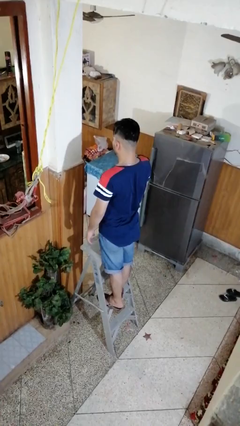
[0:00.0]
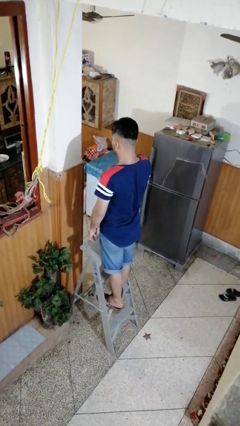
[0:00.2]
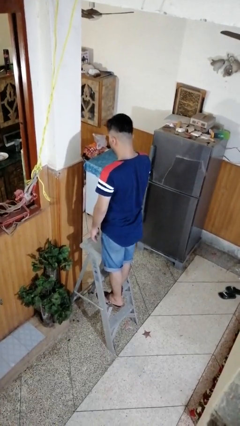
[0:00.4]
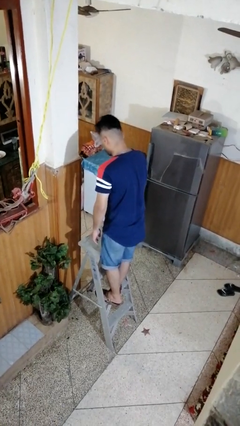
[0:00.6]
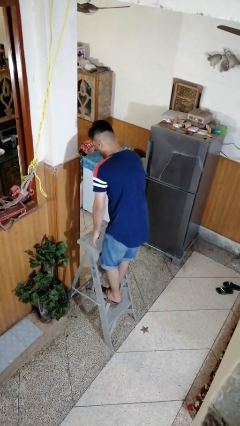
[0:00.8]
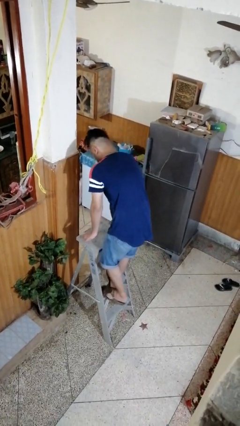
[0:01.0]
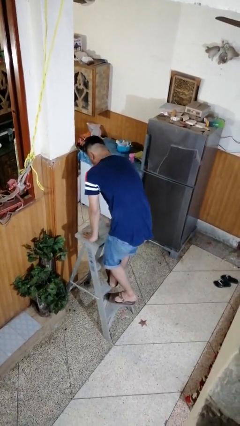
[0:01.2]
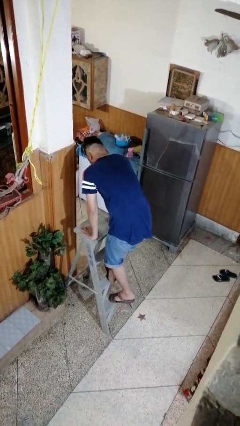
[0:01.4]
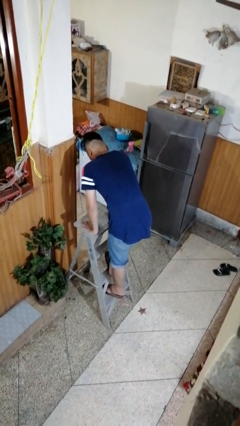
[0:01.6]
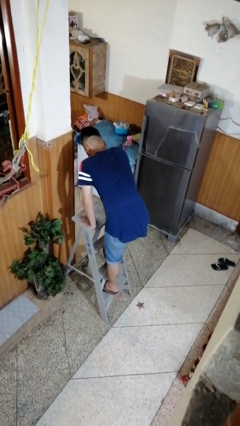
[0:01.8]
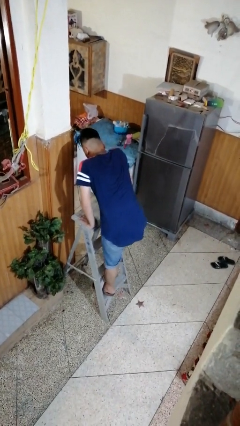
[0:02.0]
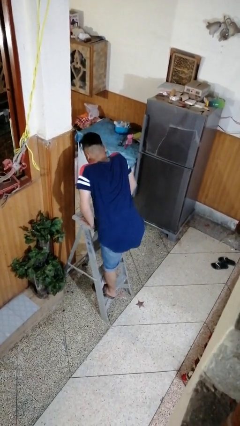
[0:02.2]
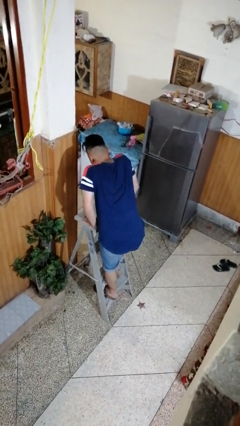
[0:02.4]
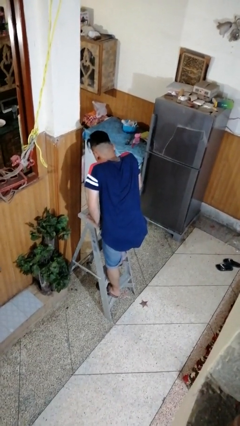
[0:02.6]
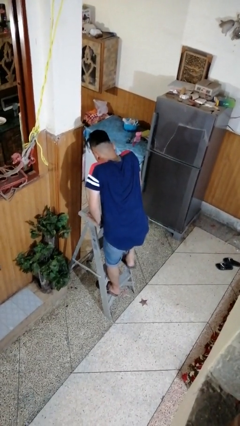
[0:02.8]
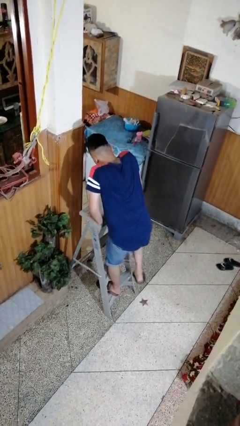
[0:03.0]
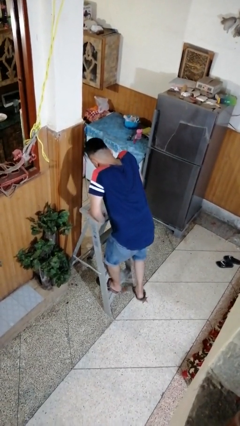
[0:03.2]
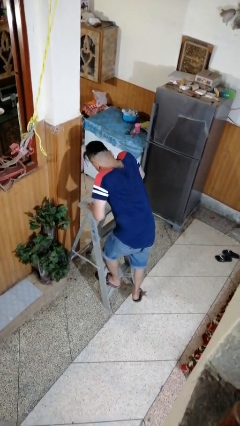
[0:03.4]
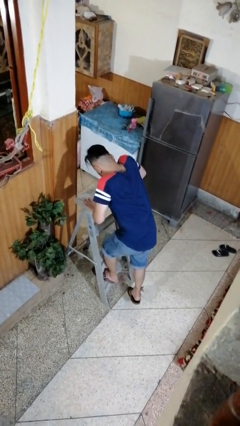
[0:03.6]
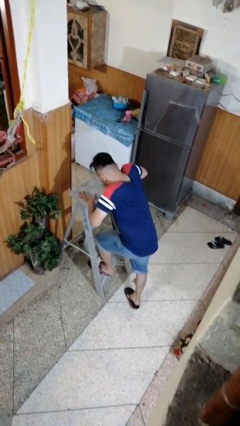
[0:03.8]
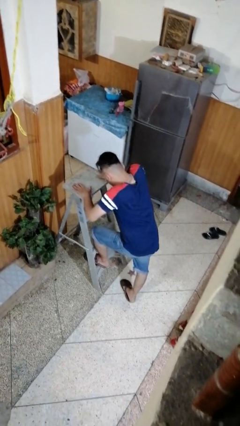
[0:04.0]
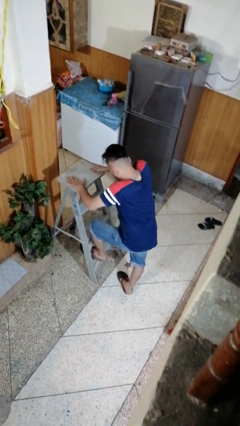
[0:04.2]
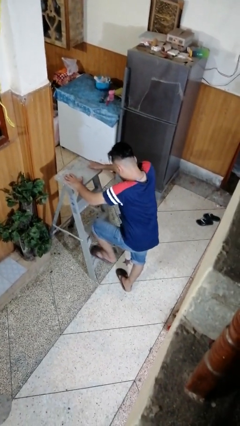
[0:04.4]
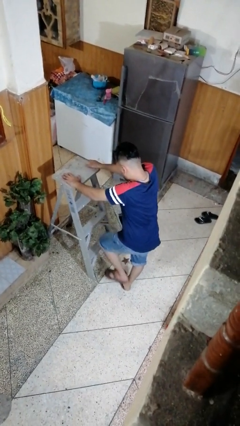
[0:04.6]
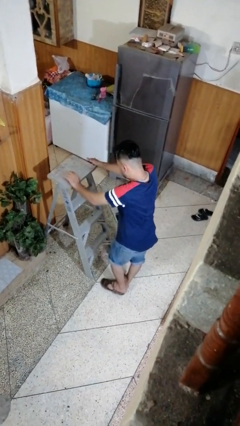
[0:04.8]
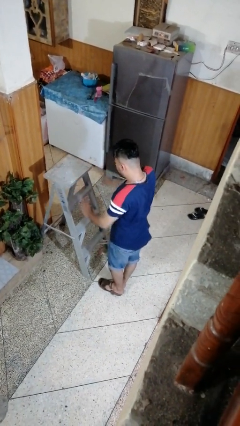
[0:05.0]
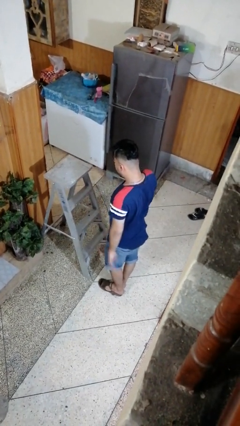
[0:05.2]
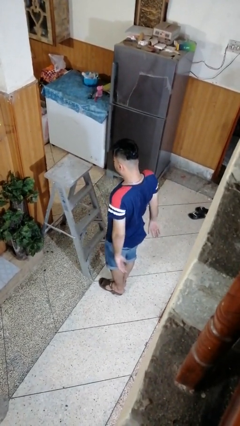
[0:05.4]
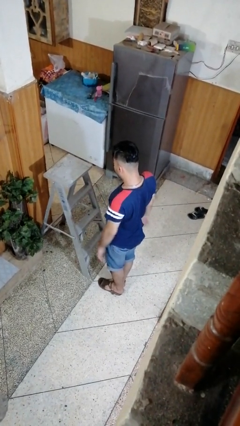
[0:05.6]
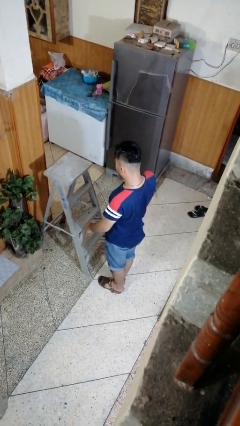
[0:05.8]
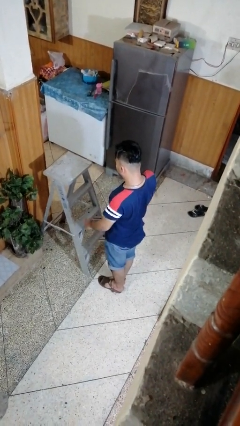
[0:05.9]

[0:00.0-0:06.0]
person climbs down ladder

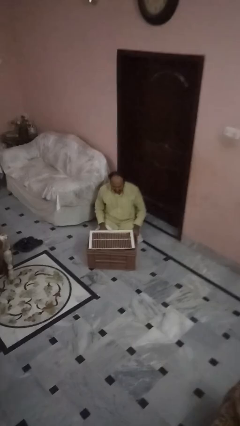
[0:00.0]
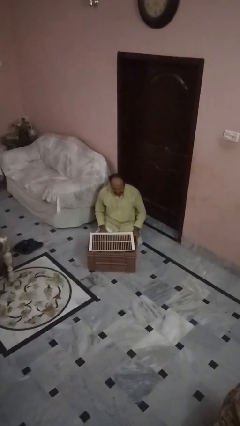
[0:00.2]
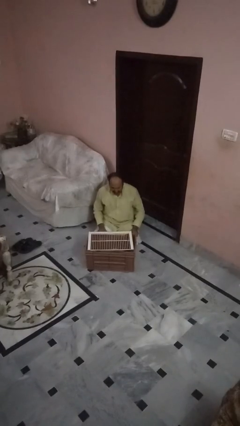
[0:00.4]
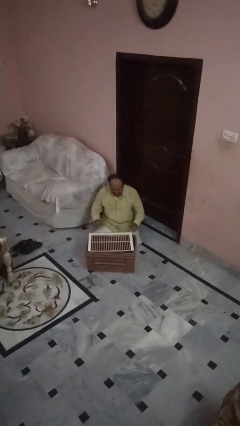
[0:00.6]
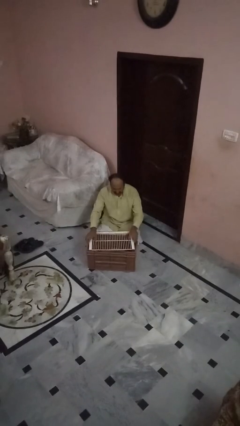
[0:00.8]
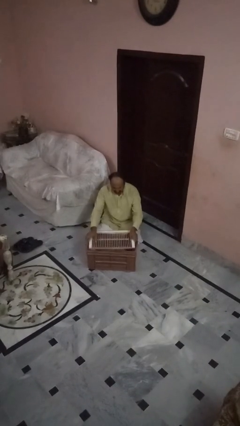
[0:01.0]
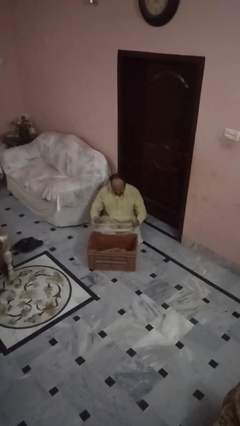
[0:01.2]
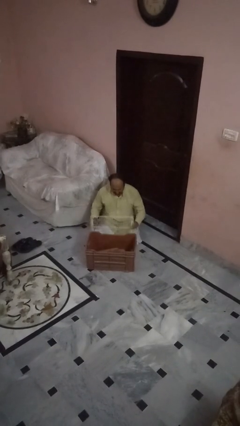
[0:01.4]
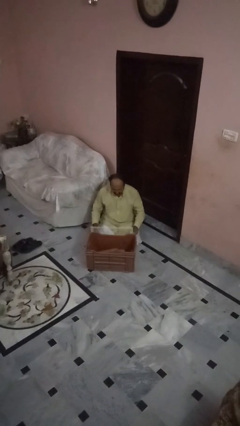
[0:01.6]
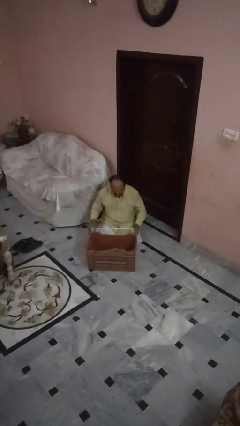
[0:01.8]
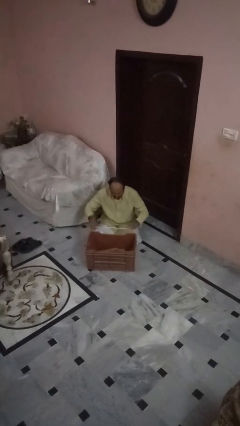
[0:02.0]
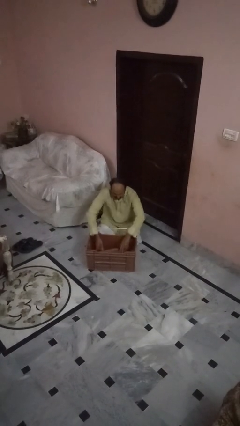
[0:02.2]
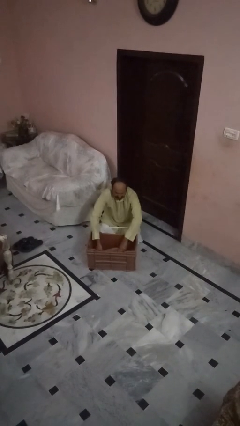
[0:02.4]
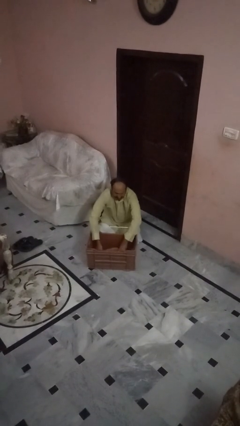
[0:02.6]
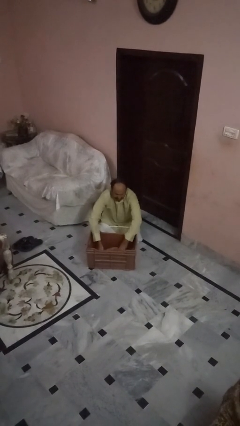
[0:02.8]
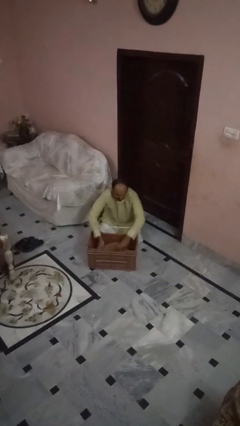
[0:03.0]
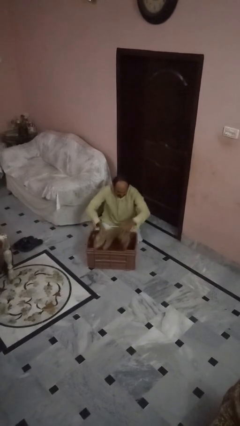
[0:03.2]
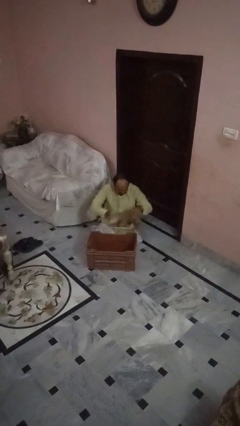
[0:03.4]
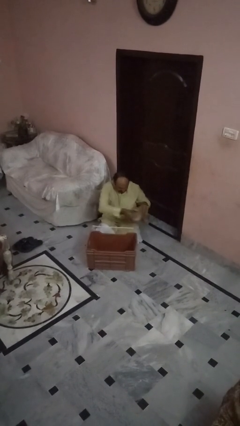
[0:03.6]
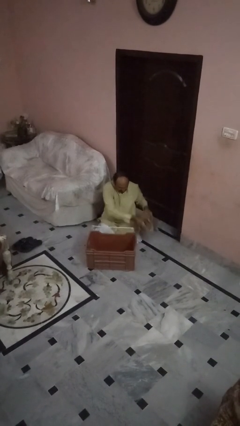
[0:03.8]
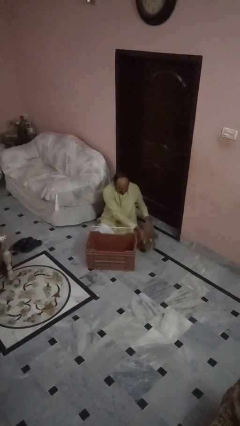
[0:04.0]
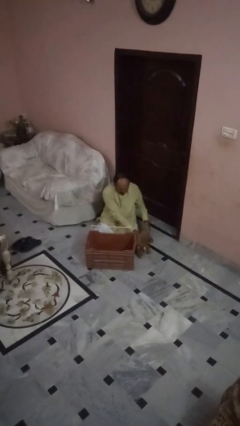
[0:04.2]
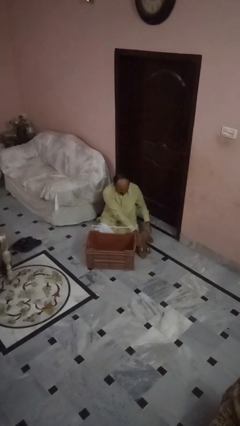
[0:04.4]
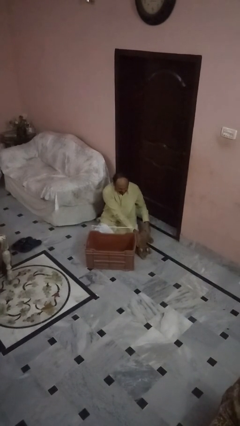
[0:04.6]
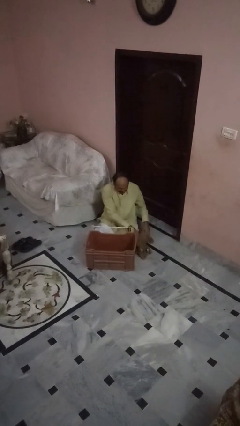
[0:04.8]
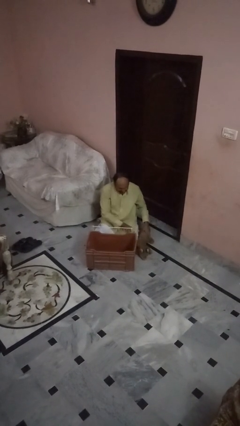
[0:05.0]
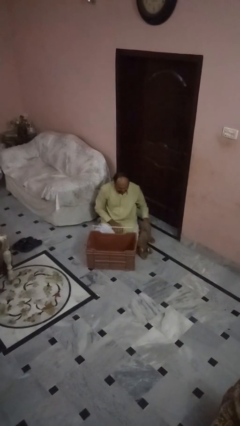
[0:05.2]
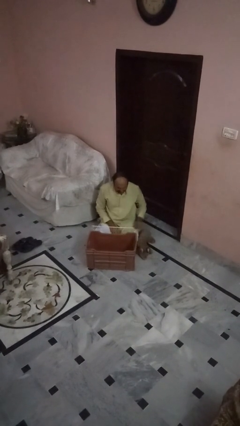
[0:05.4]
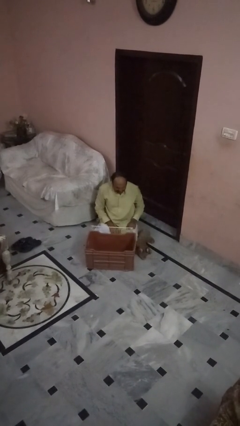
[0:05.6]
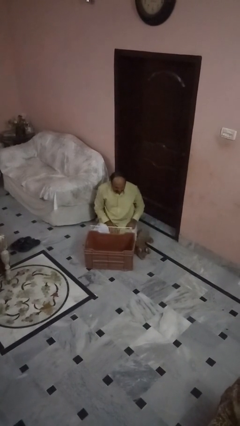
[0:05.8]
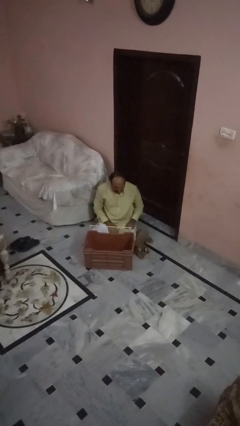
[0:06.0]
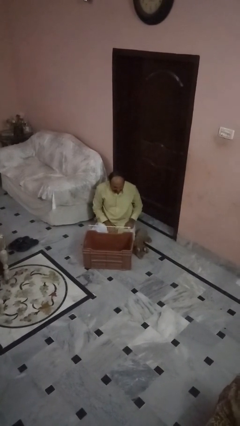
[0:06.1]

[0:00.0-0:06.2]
person uncrates dog

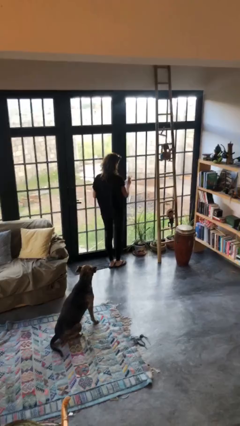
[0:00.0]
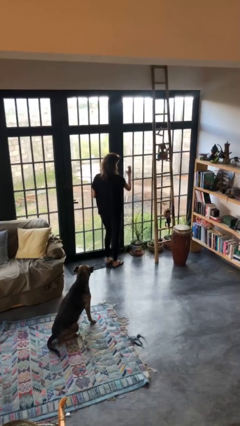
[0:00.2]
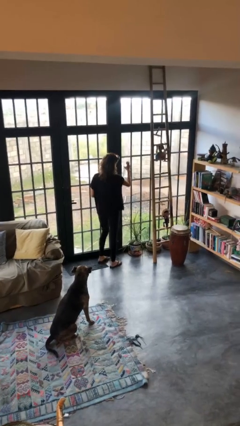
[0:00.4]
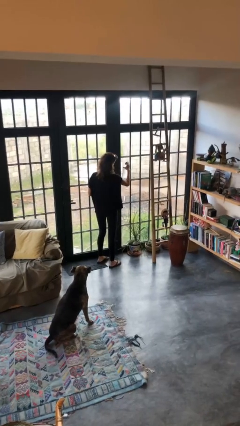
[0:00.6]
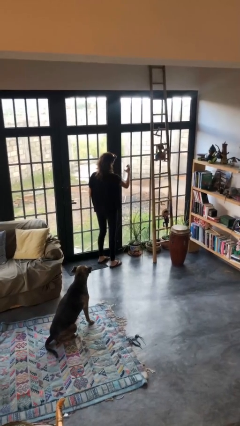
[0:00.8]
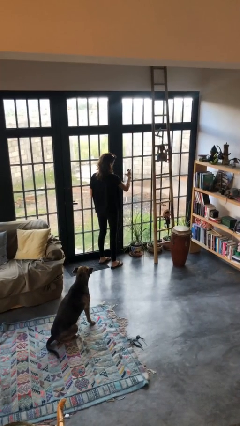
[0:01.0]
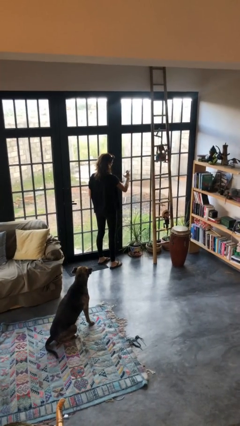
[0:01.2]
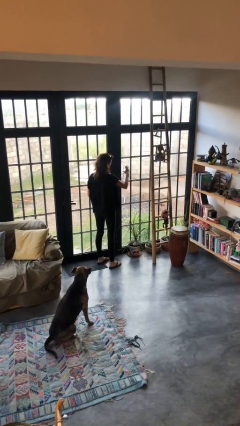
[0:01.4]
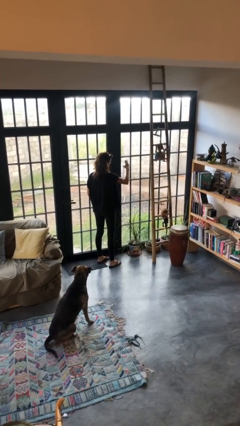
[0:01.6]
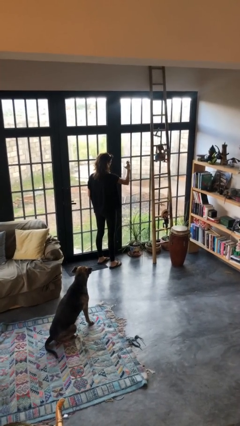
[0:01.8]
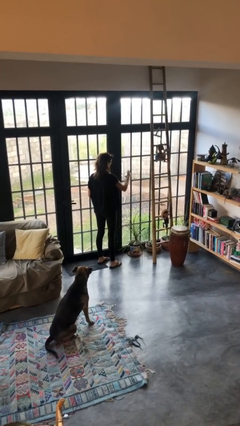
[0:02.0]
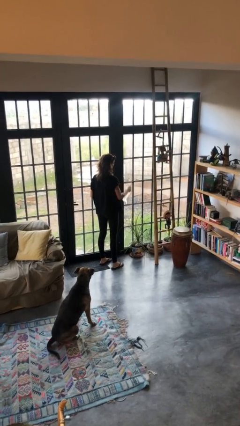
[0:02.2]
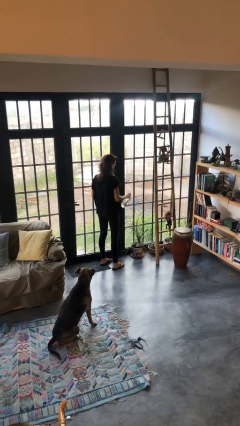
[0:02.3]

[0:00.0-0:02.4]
person sprays from bottle

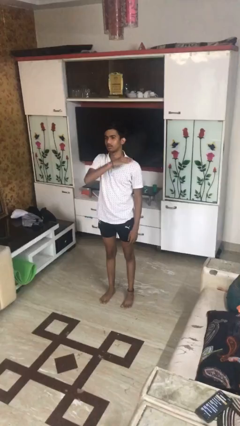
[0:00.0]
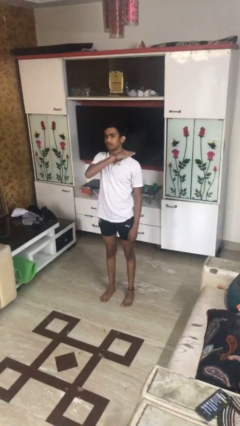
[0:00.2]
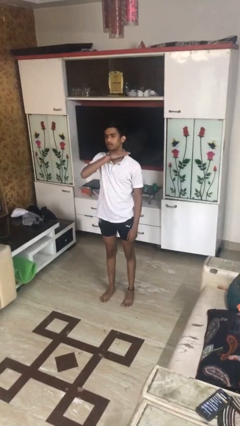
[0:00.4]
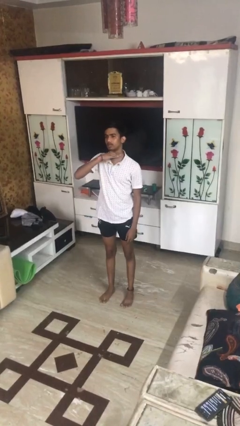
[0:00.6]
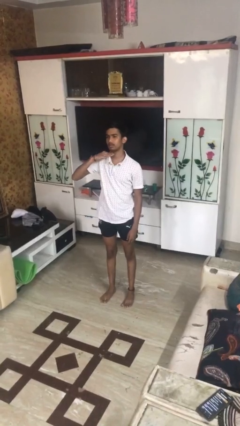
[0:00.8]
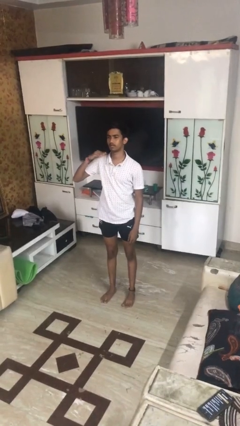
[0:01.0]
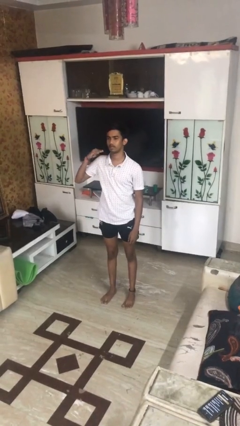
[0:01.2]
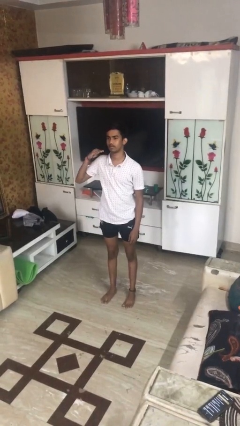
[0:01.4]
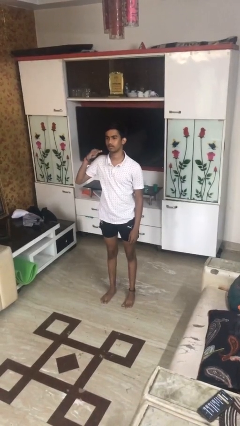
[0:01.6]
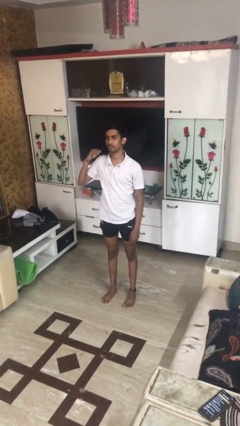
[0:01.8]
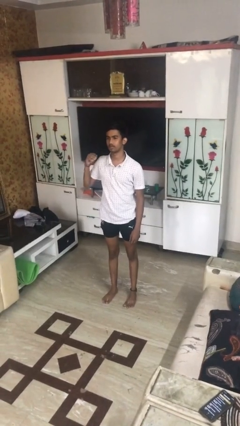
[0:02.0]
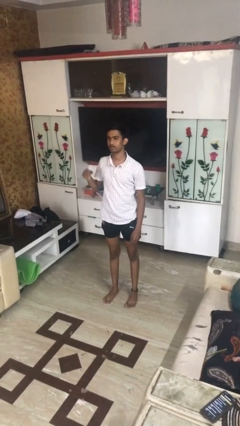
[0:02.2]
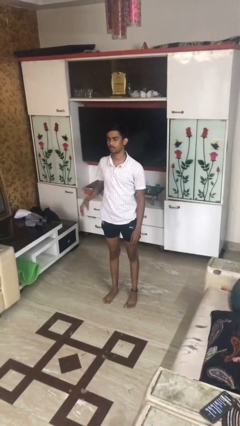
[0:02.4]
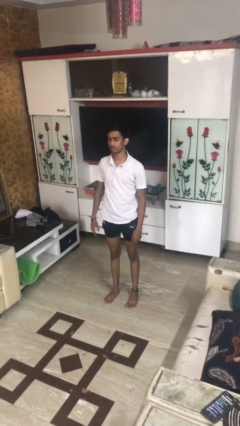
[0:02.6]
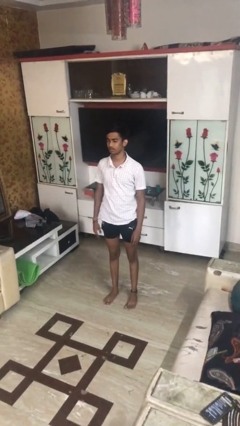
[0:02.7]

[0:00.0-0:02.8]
person gestures cut

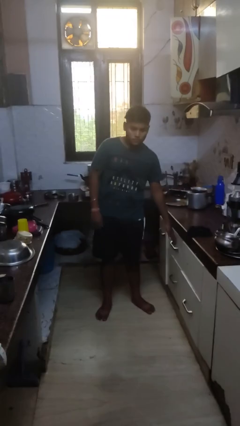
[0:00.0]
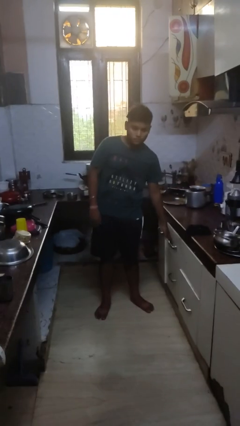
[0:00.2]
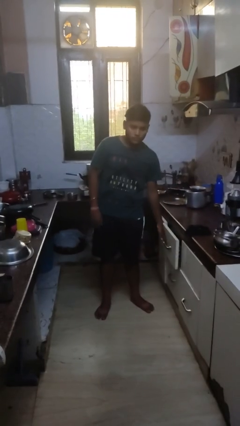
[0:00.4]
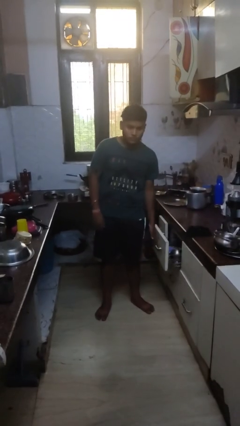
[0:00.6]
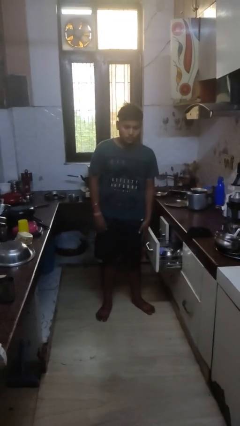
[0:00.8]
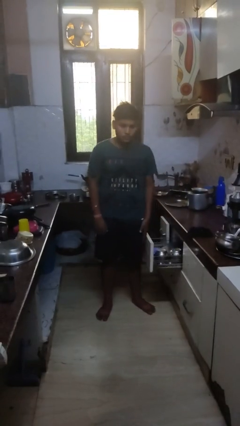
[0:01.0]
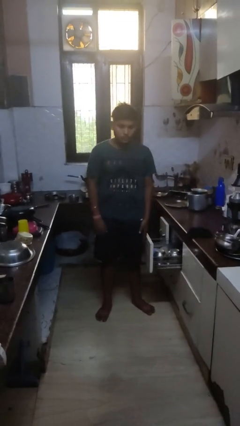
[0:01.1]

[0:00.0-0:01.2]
person opens kitchen drawer
